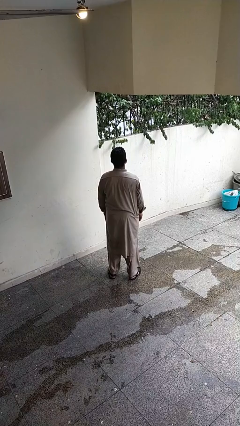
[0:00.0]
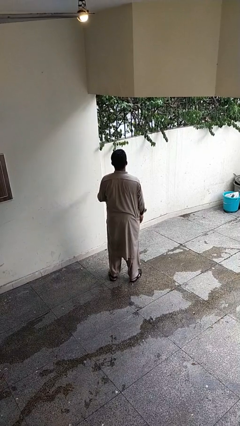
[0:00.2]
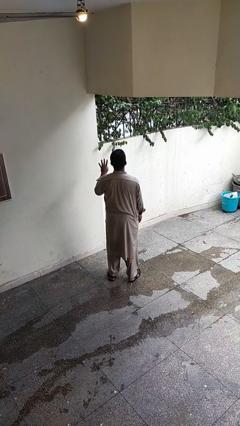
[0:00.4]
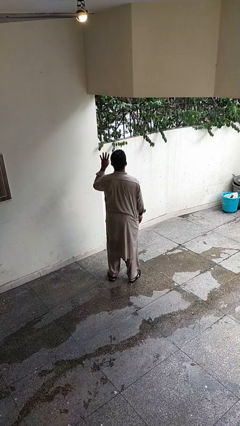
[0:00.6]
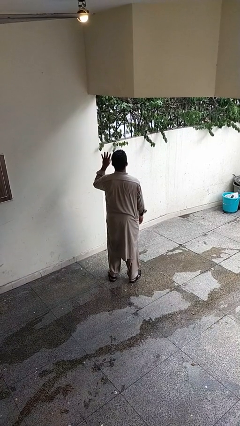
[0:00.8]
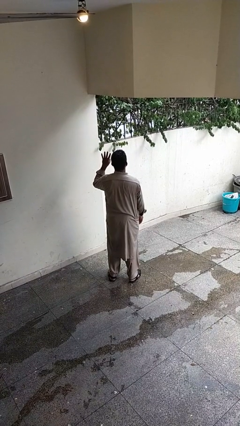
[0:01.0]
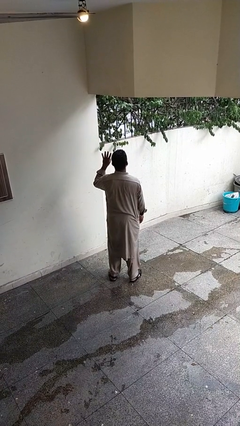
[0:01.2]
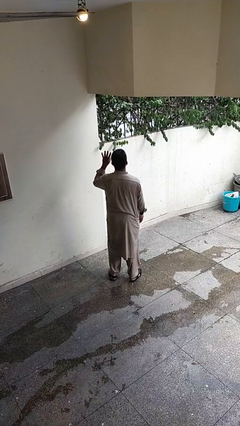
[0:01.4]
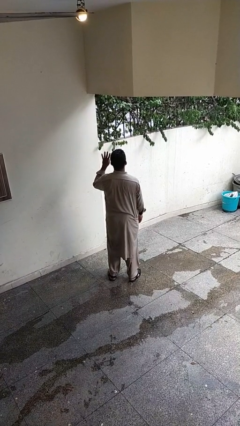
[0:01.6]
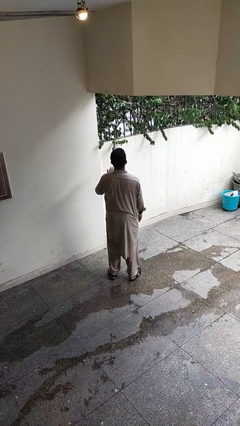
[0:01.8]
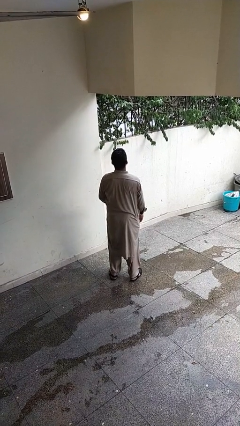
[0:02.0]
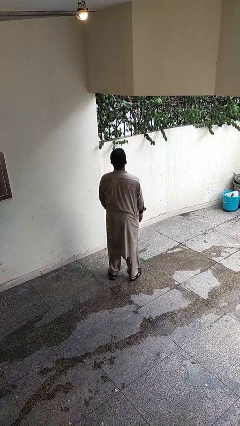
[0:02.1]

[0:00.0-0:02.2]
person gestures number four

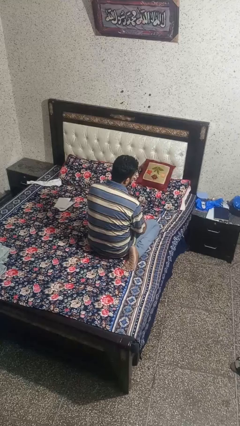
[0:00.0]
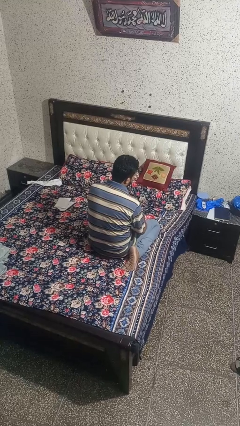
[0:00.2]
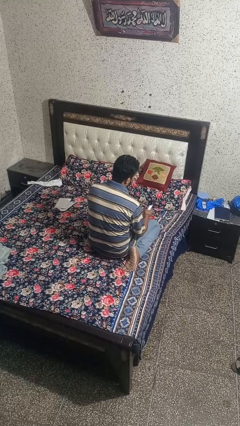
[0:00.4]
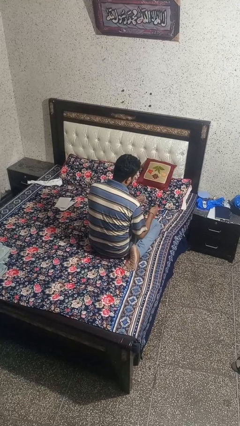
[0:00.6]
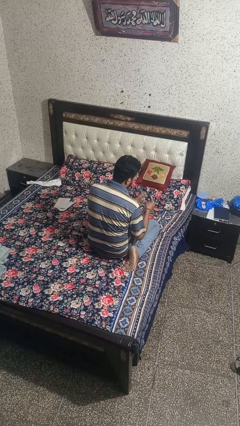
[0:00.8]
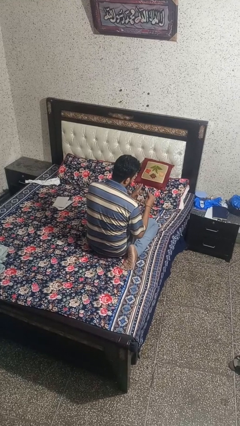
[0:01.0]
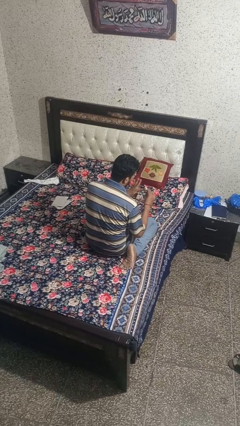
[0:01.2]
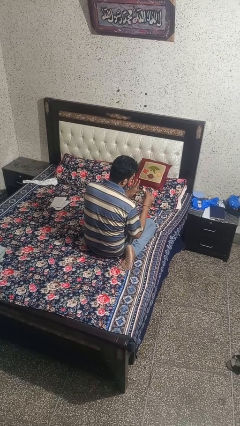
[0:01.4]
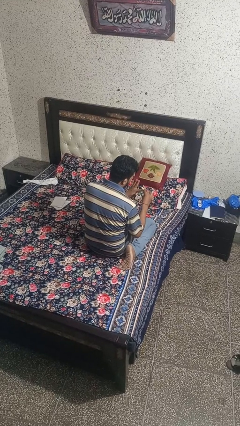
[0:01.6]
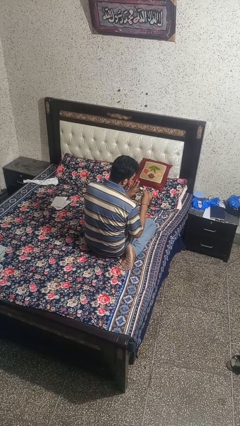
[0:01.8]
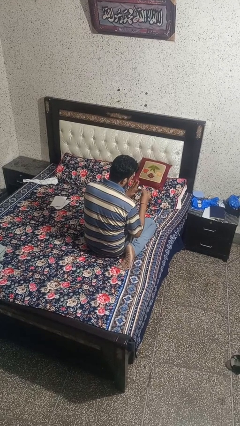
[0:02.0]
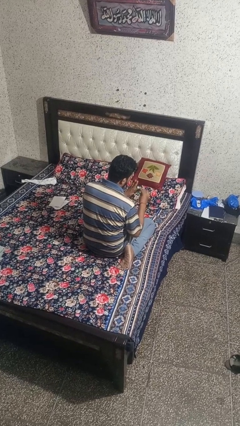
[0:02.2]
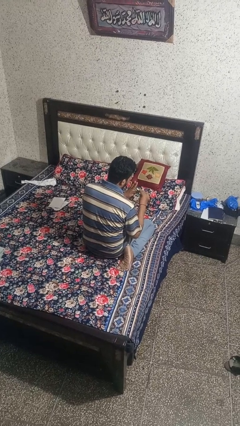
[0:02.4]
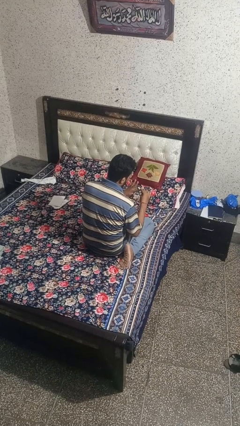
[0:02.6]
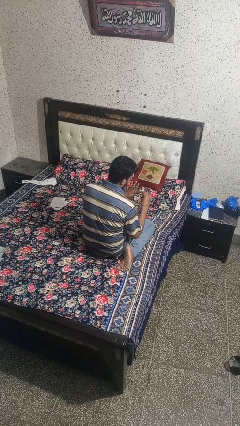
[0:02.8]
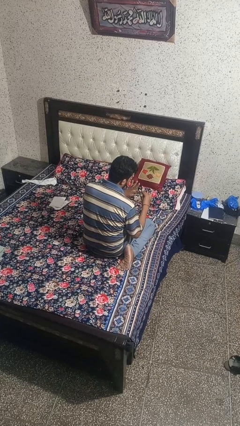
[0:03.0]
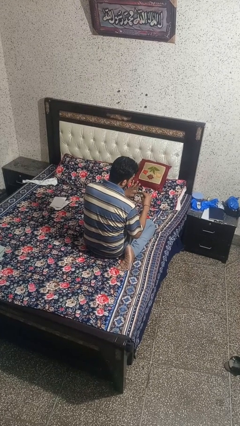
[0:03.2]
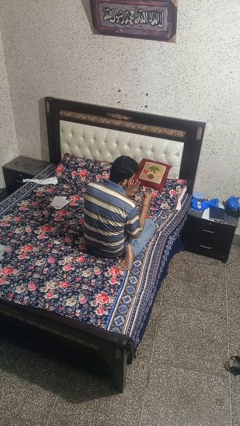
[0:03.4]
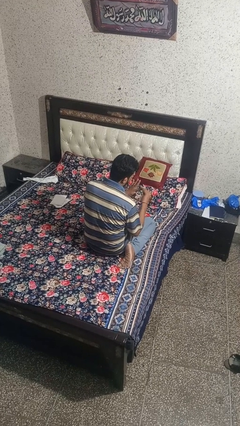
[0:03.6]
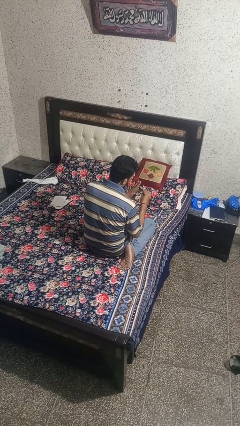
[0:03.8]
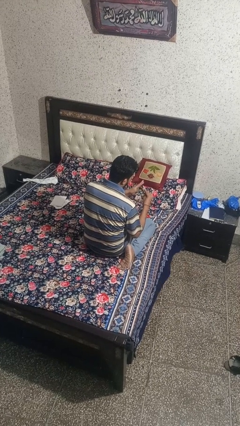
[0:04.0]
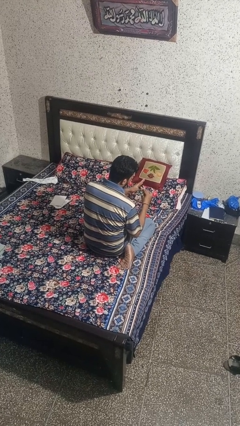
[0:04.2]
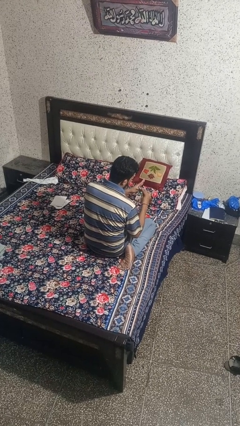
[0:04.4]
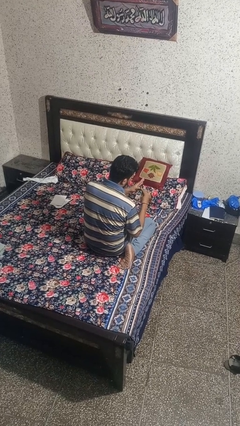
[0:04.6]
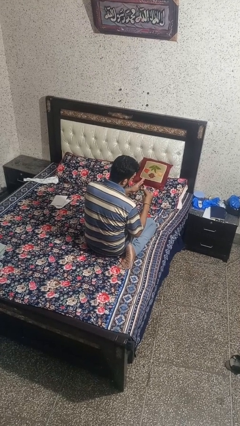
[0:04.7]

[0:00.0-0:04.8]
person files fingernails

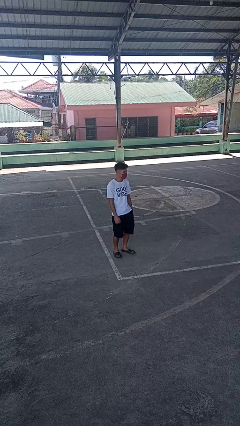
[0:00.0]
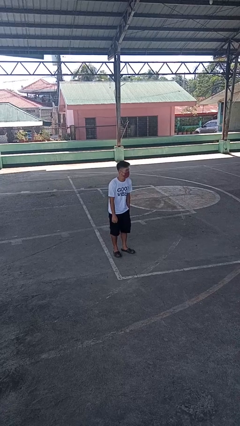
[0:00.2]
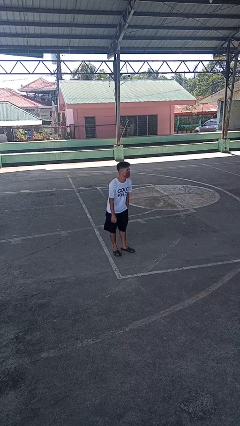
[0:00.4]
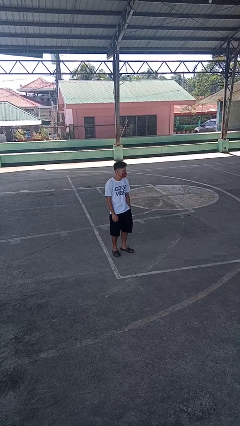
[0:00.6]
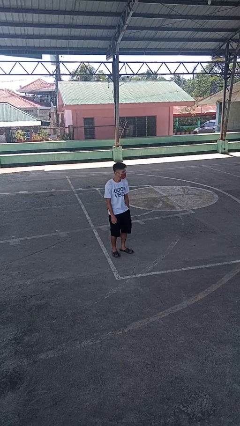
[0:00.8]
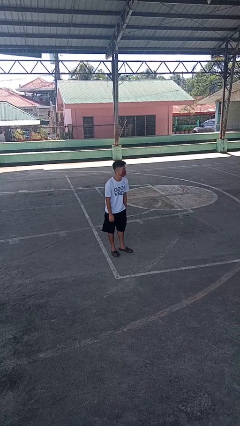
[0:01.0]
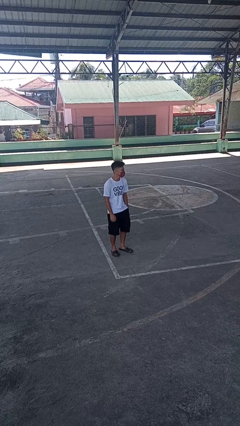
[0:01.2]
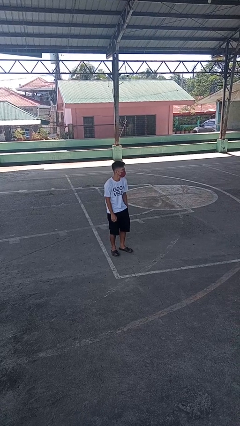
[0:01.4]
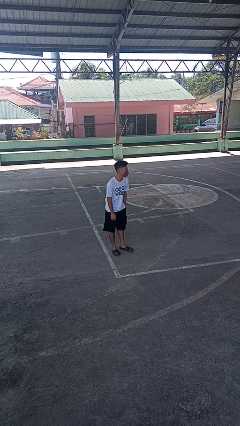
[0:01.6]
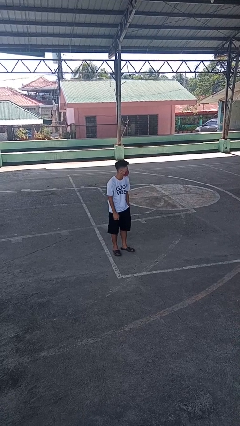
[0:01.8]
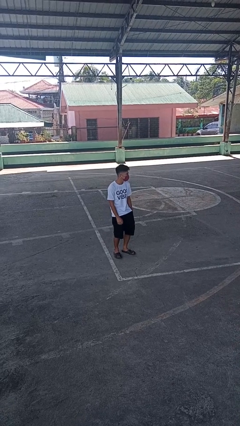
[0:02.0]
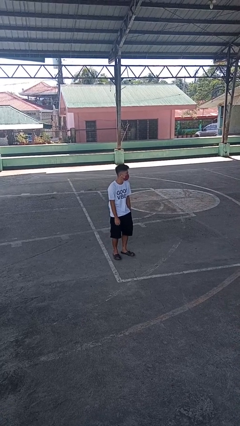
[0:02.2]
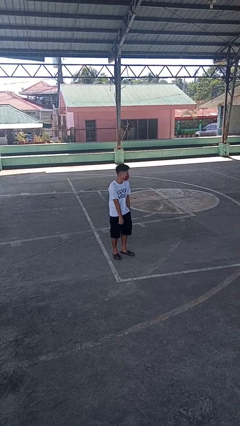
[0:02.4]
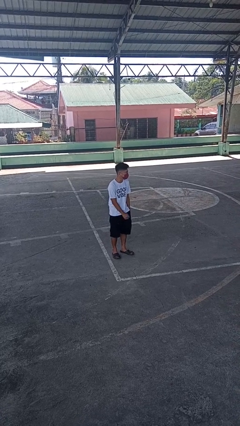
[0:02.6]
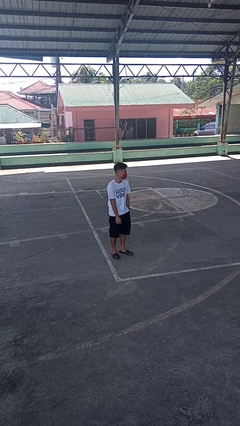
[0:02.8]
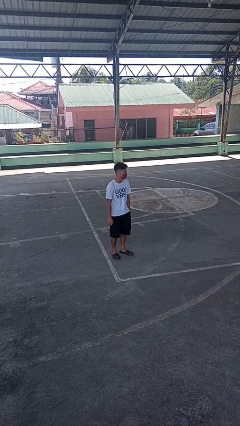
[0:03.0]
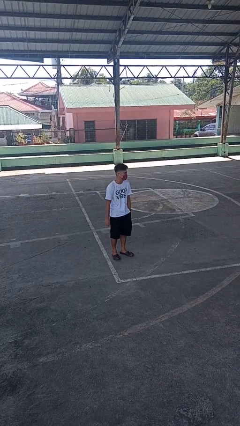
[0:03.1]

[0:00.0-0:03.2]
person wiggles hips

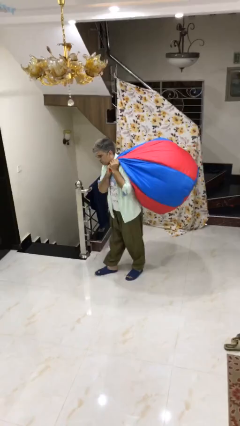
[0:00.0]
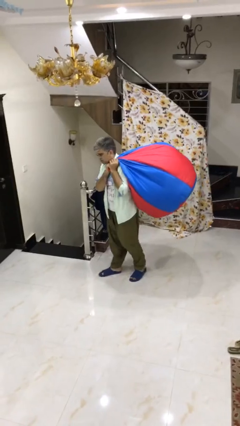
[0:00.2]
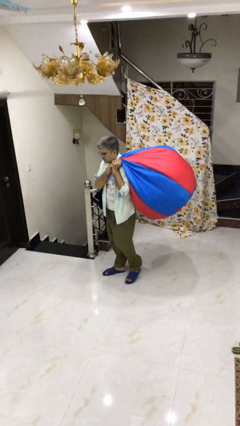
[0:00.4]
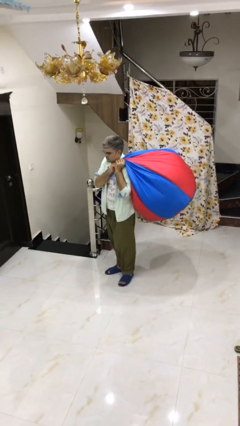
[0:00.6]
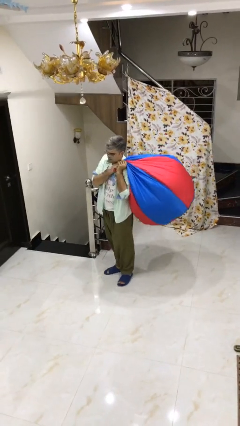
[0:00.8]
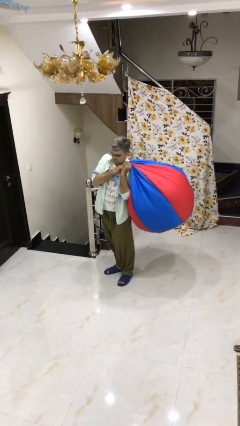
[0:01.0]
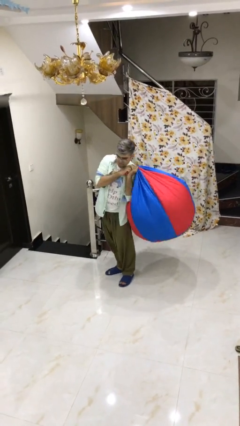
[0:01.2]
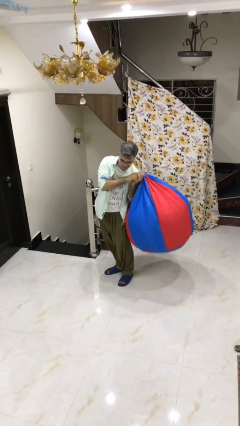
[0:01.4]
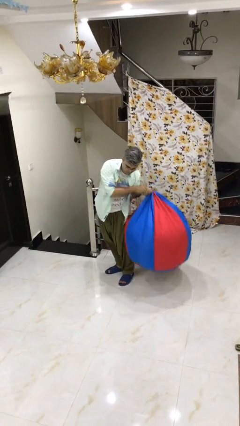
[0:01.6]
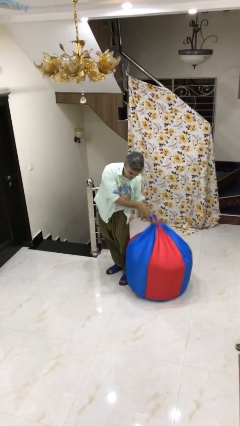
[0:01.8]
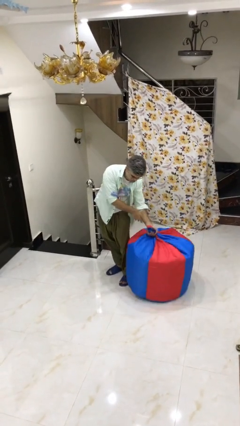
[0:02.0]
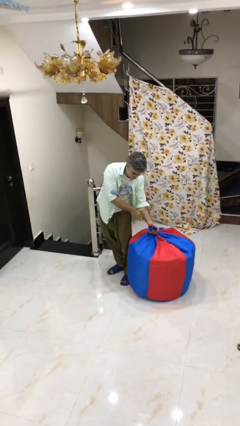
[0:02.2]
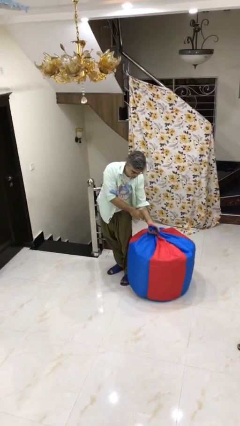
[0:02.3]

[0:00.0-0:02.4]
person puts down object on floor

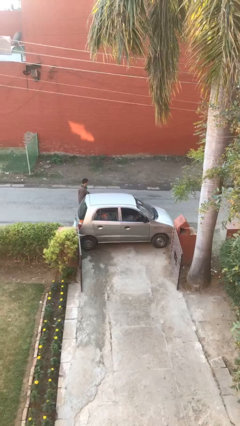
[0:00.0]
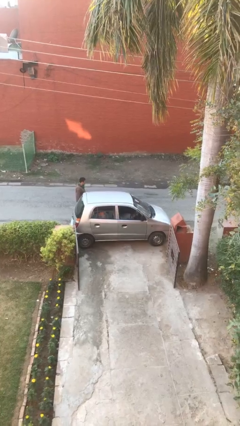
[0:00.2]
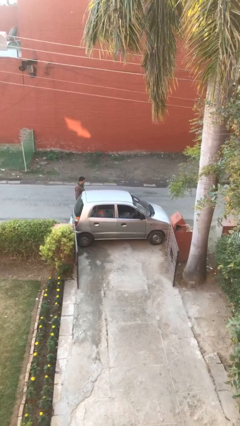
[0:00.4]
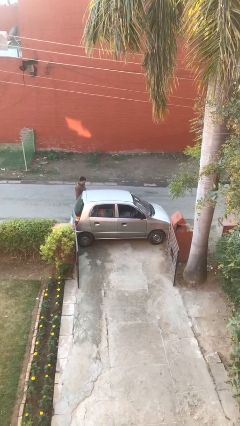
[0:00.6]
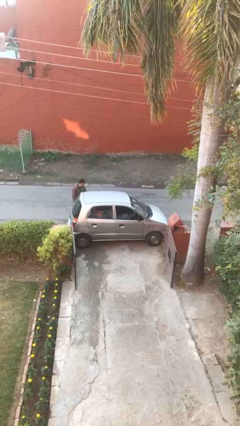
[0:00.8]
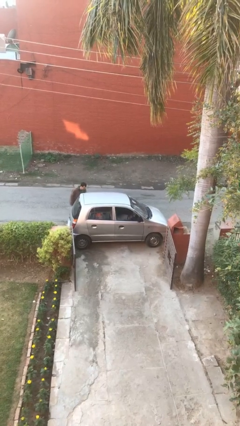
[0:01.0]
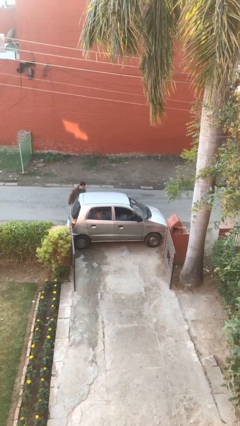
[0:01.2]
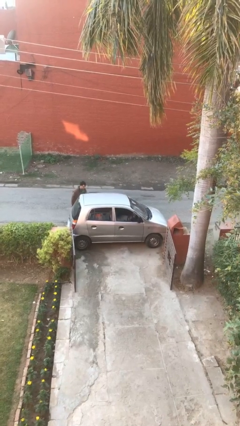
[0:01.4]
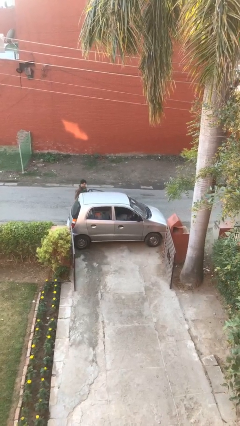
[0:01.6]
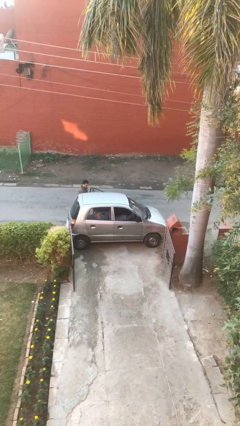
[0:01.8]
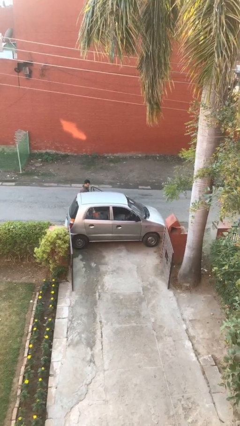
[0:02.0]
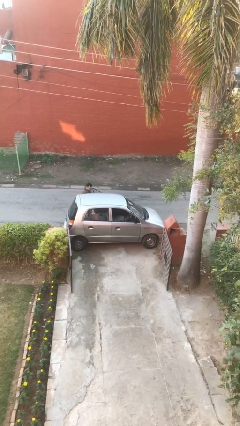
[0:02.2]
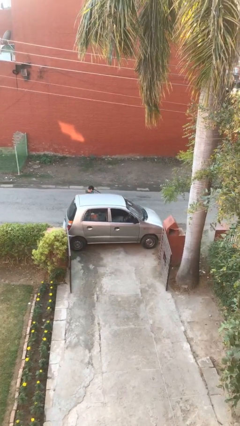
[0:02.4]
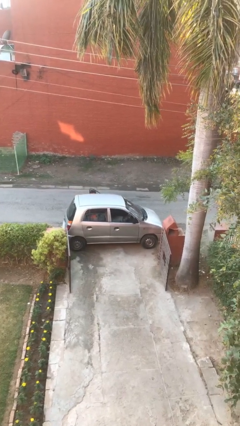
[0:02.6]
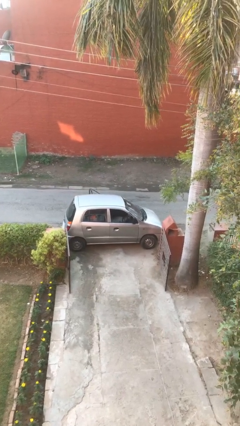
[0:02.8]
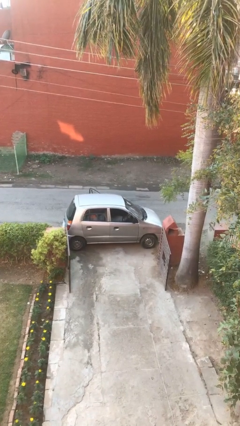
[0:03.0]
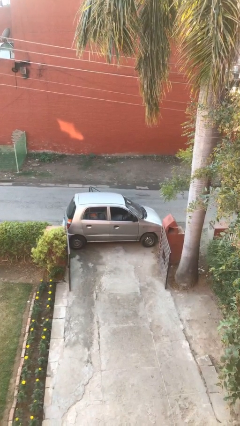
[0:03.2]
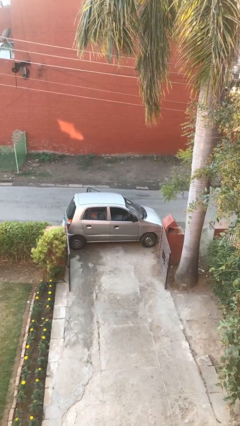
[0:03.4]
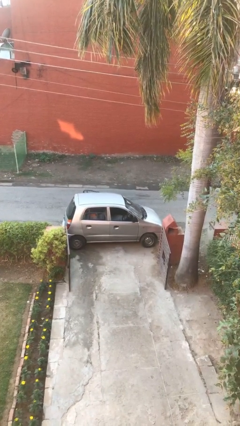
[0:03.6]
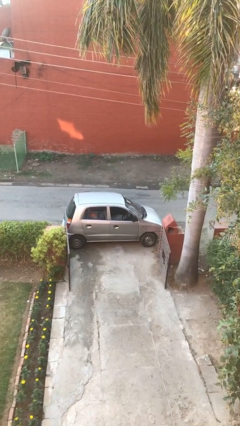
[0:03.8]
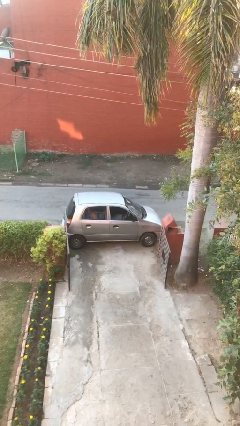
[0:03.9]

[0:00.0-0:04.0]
car picks up person

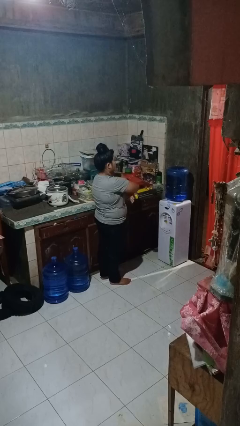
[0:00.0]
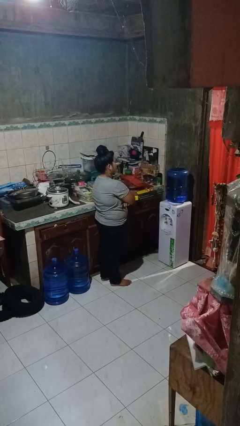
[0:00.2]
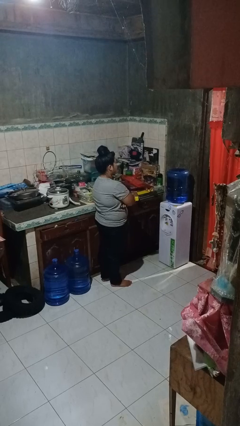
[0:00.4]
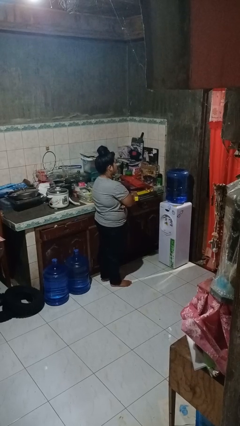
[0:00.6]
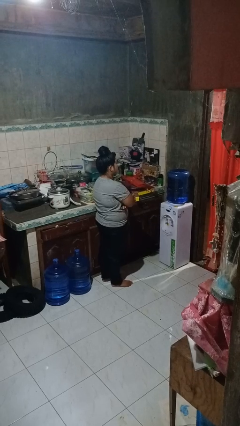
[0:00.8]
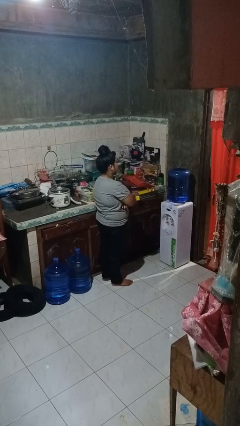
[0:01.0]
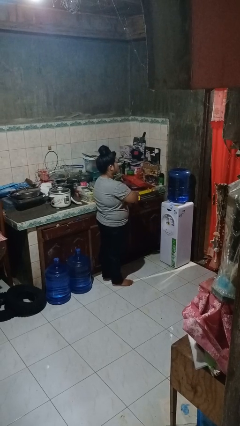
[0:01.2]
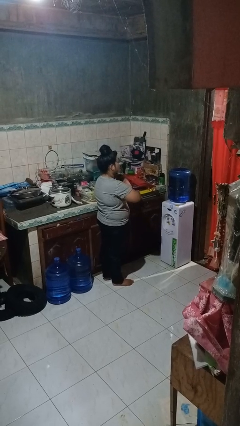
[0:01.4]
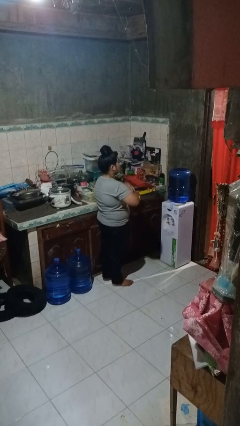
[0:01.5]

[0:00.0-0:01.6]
person crosses arms
